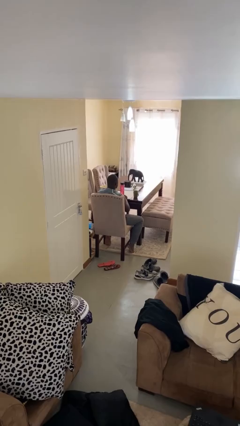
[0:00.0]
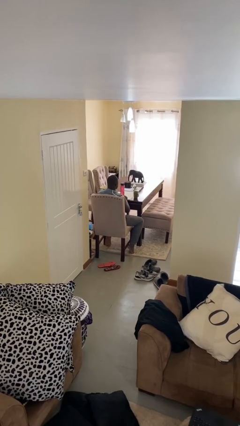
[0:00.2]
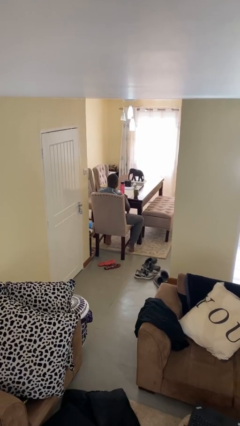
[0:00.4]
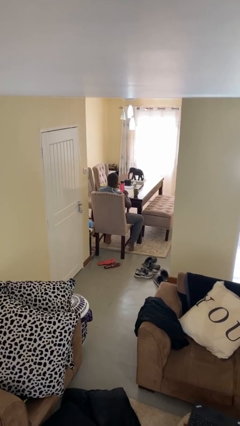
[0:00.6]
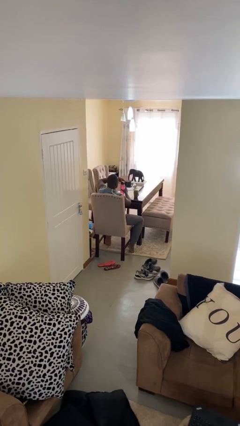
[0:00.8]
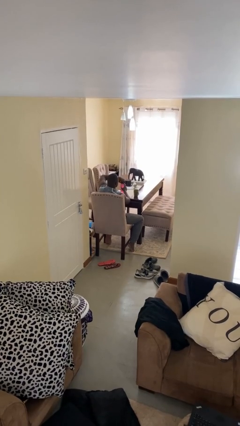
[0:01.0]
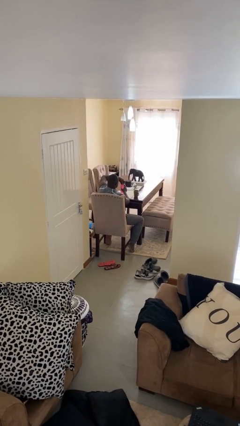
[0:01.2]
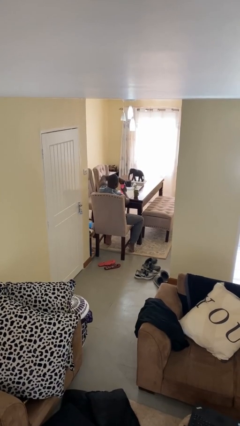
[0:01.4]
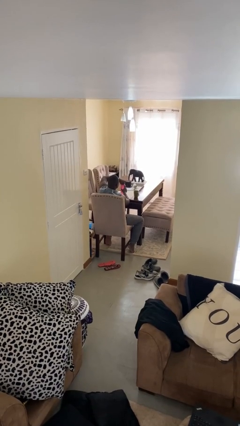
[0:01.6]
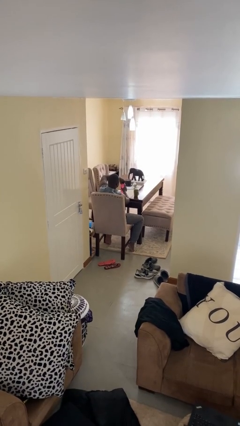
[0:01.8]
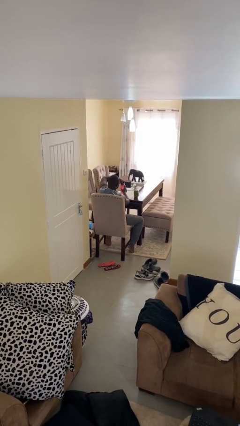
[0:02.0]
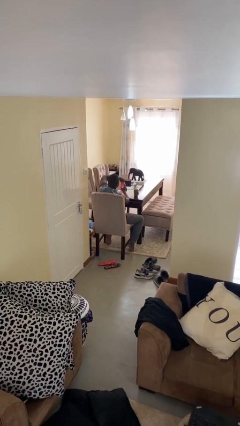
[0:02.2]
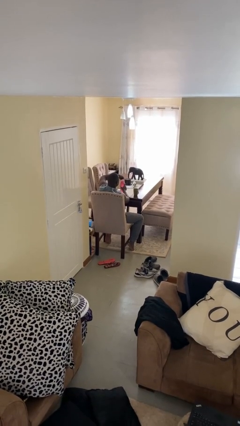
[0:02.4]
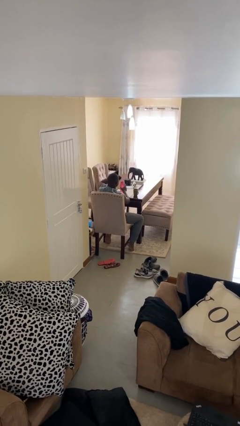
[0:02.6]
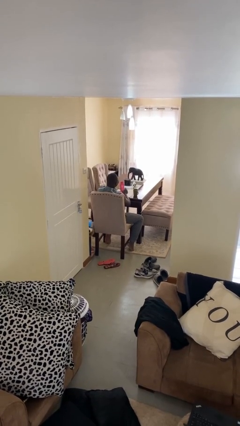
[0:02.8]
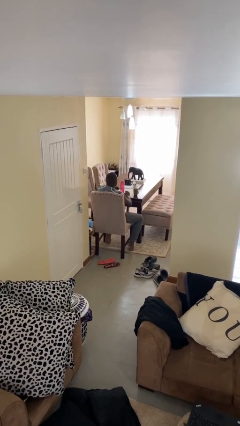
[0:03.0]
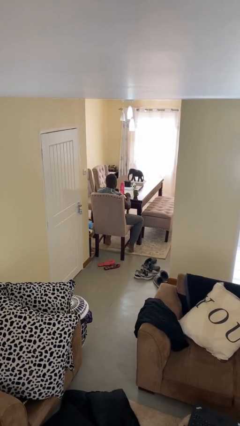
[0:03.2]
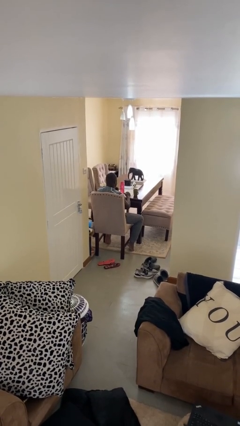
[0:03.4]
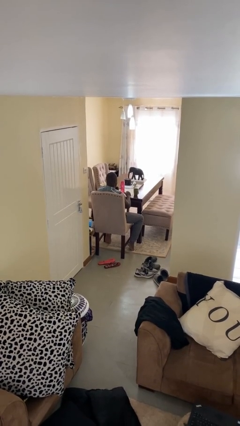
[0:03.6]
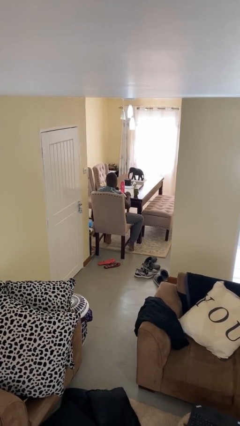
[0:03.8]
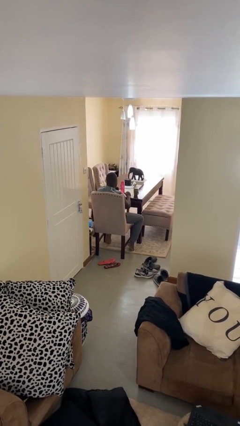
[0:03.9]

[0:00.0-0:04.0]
person unscrews lid from bottle

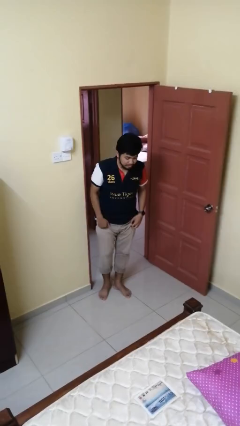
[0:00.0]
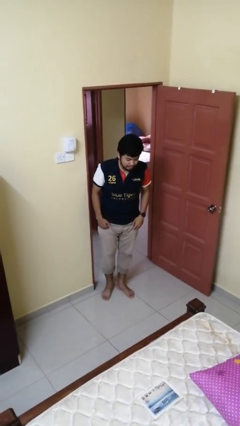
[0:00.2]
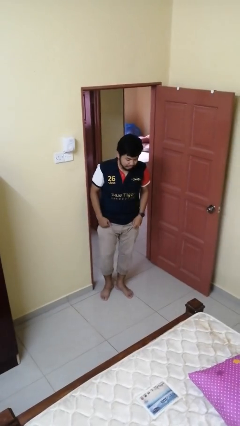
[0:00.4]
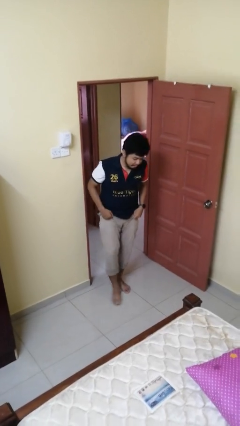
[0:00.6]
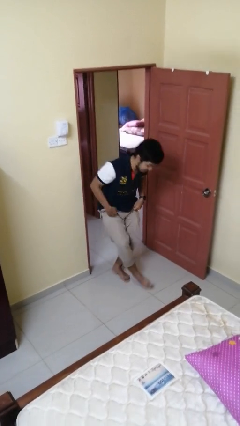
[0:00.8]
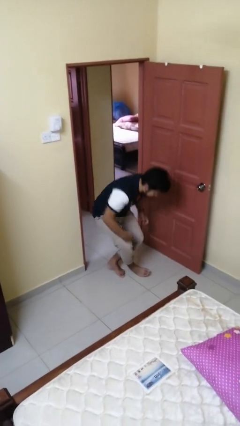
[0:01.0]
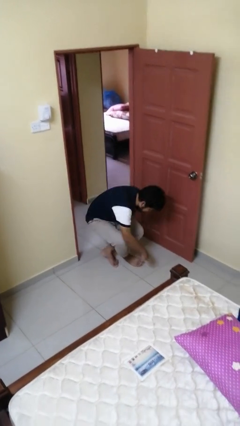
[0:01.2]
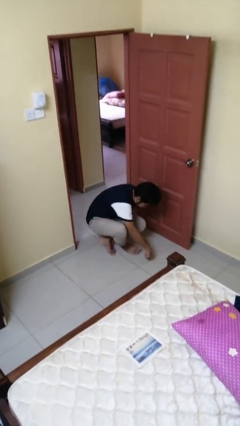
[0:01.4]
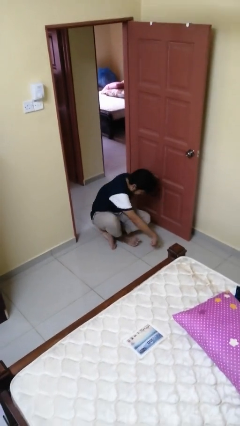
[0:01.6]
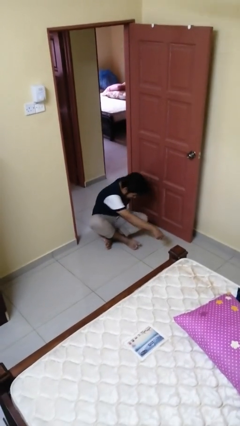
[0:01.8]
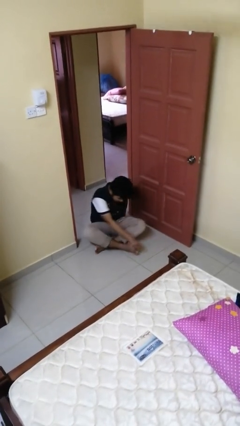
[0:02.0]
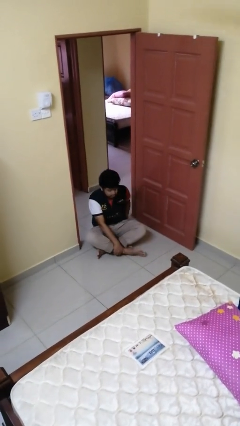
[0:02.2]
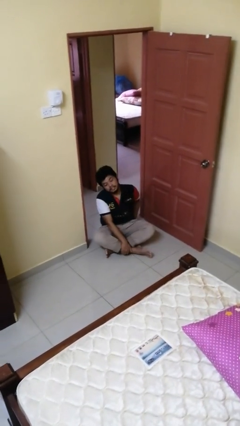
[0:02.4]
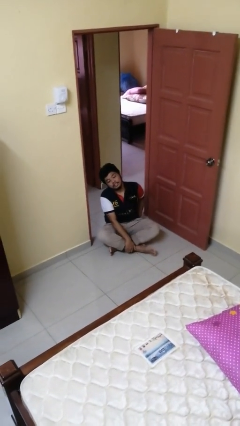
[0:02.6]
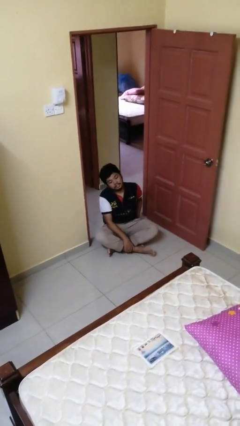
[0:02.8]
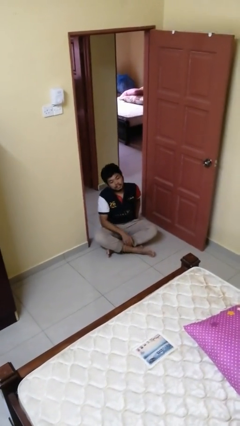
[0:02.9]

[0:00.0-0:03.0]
person sits crisscross

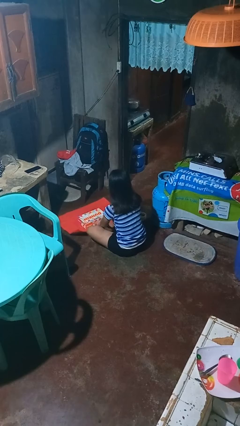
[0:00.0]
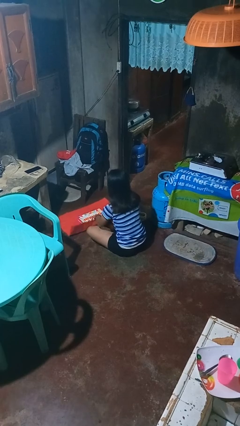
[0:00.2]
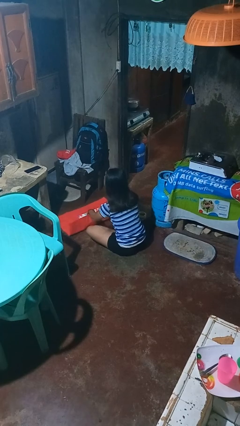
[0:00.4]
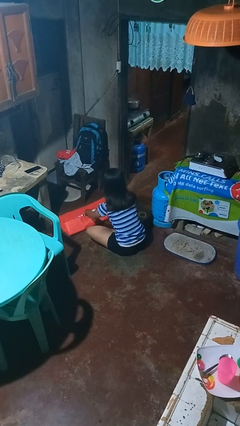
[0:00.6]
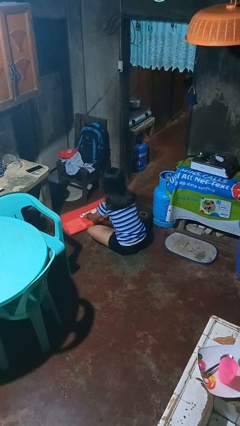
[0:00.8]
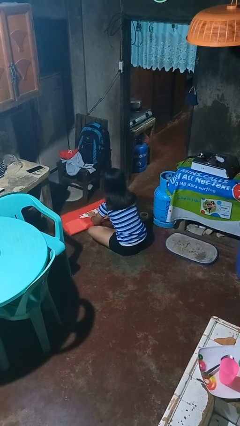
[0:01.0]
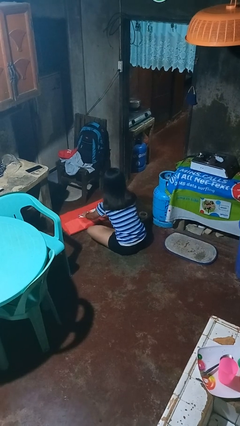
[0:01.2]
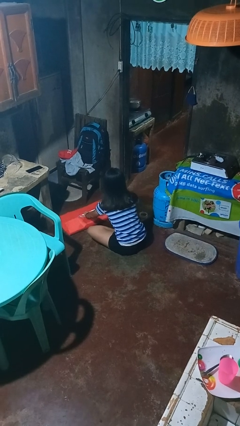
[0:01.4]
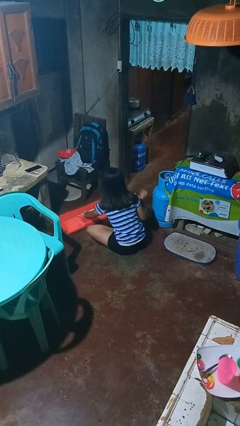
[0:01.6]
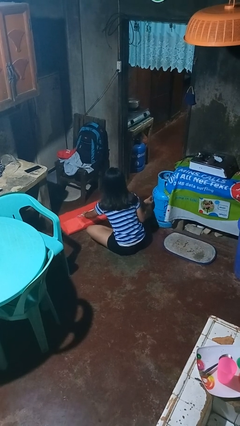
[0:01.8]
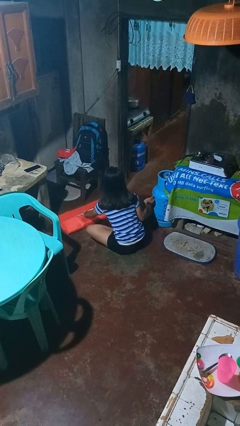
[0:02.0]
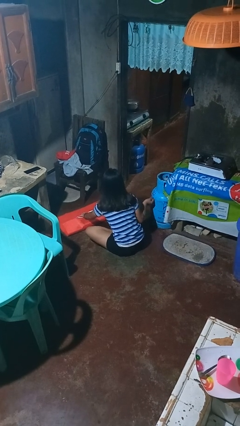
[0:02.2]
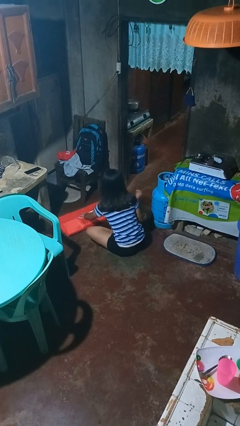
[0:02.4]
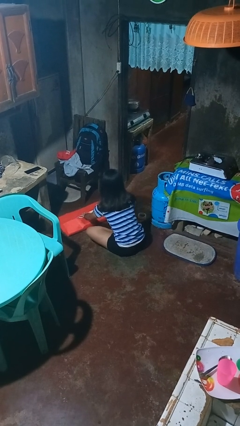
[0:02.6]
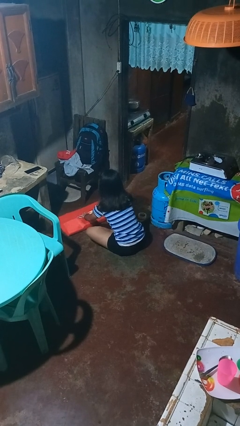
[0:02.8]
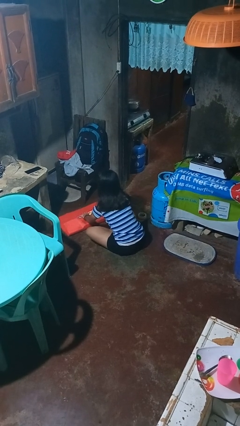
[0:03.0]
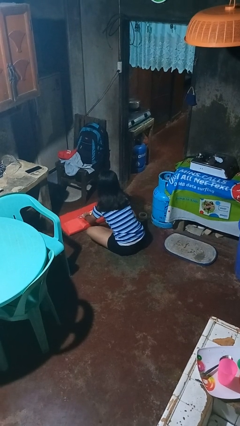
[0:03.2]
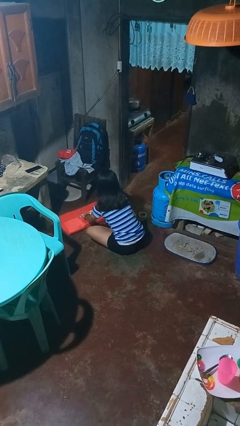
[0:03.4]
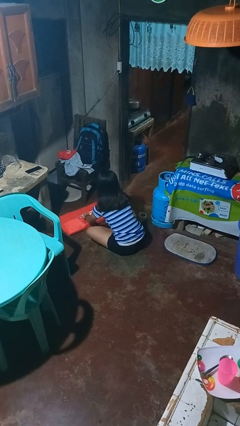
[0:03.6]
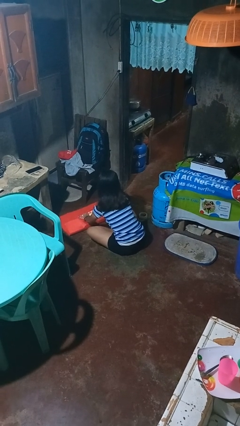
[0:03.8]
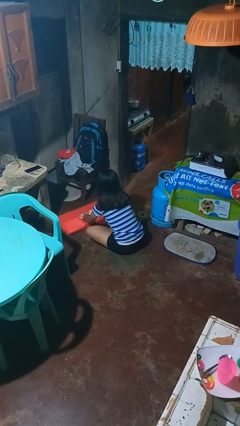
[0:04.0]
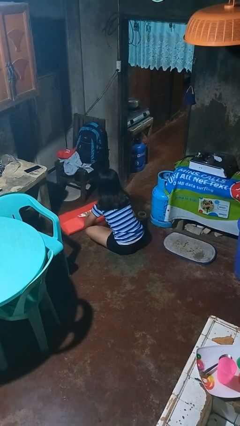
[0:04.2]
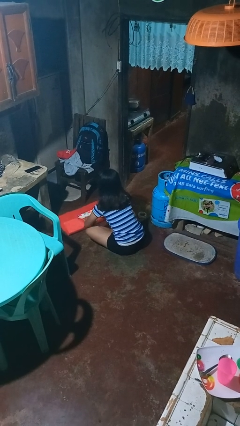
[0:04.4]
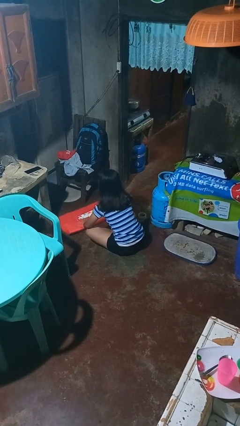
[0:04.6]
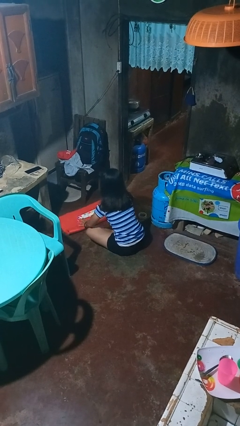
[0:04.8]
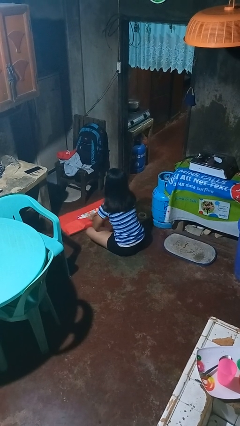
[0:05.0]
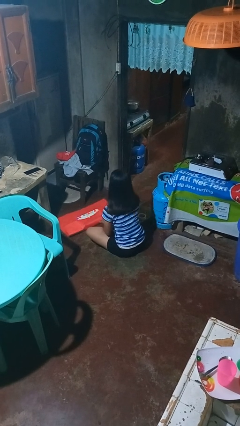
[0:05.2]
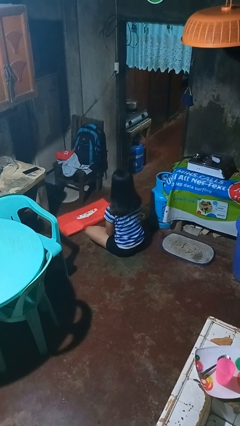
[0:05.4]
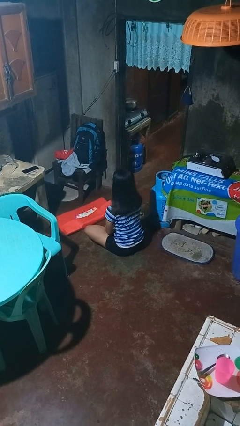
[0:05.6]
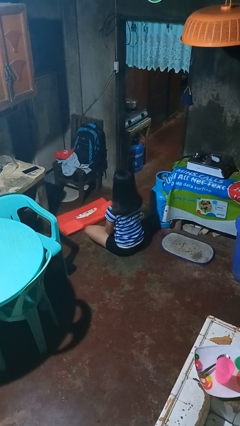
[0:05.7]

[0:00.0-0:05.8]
person wraps box

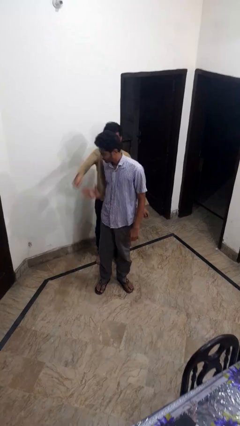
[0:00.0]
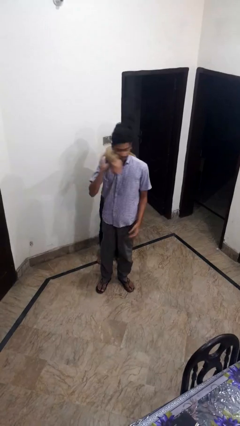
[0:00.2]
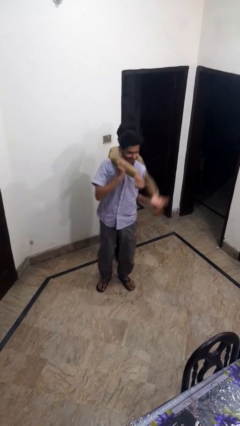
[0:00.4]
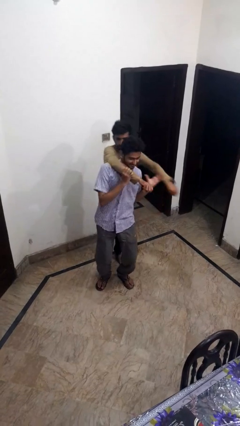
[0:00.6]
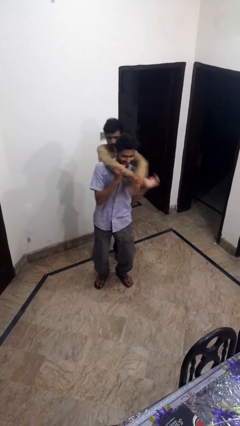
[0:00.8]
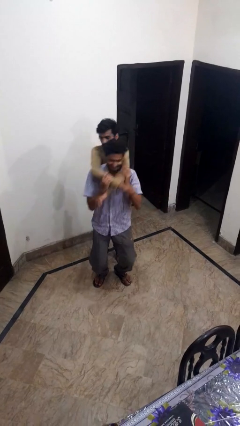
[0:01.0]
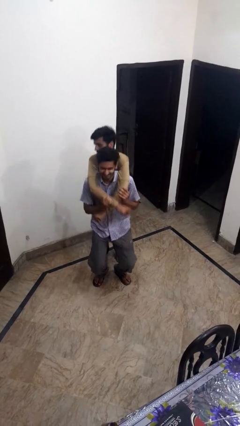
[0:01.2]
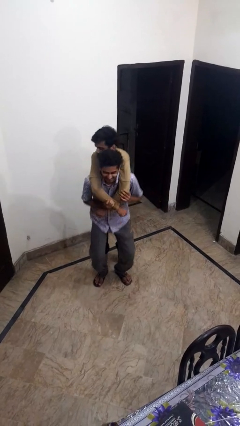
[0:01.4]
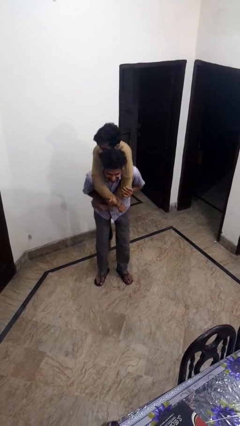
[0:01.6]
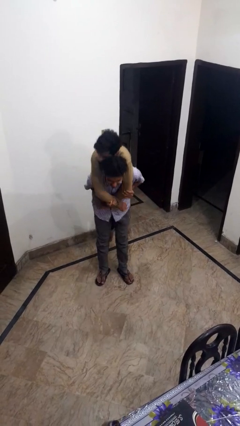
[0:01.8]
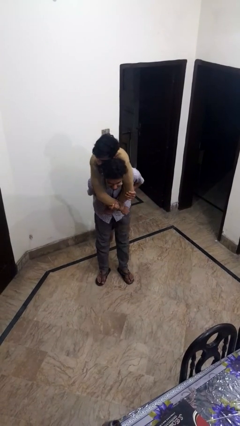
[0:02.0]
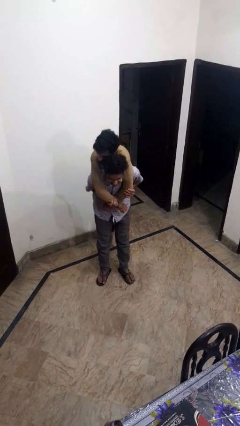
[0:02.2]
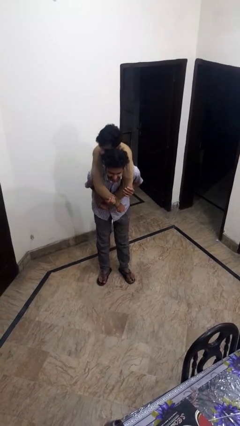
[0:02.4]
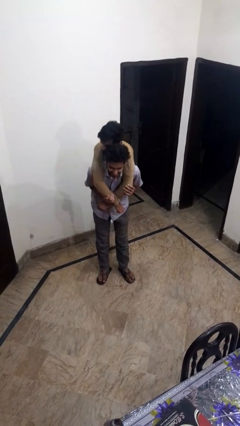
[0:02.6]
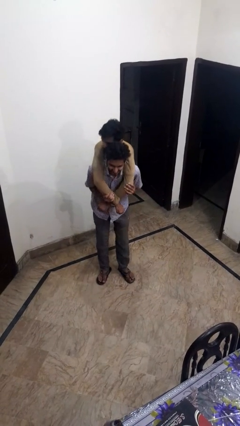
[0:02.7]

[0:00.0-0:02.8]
person carries person over shoulder

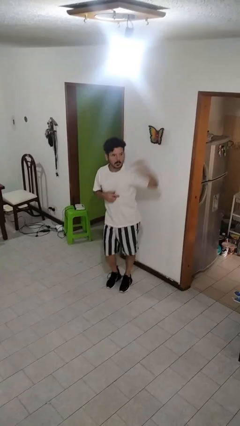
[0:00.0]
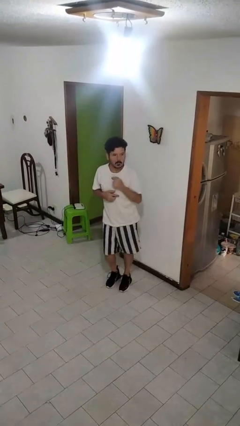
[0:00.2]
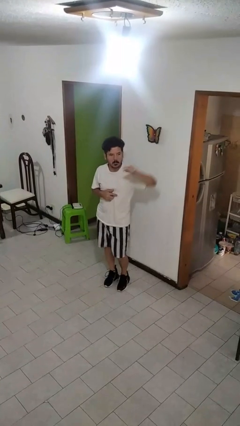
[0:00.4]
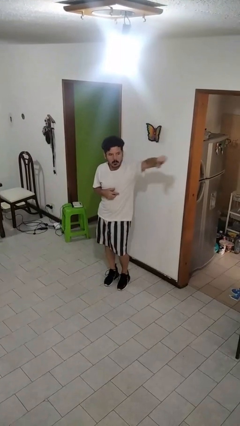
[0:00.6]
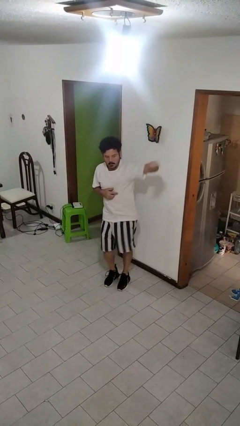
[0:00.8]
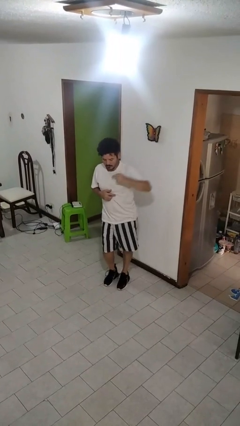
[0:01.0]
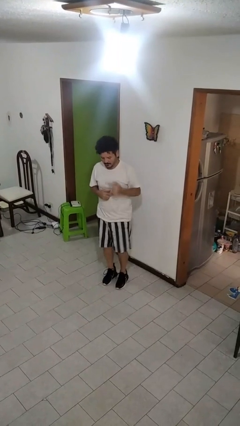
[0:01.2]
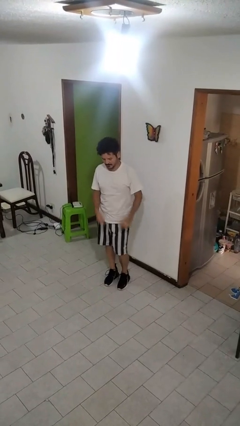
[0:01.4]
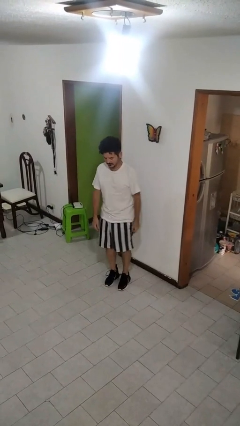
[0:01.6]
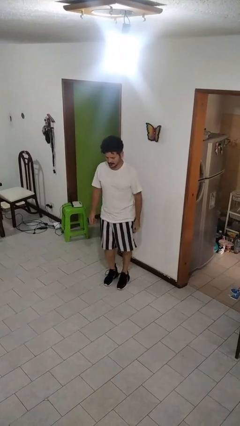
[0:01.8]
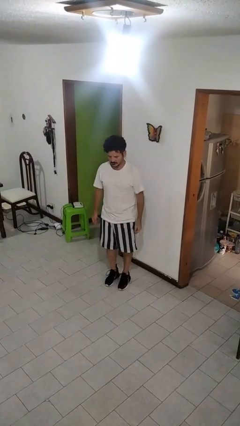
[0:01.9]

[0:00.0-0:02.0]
person dances in place
